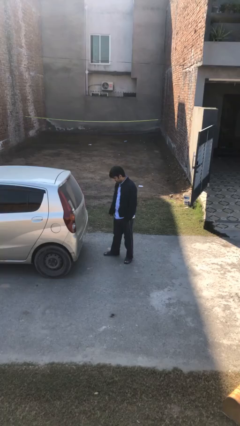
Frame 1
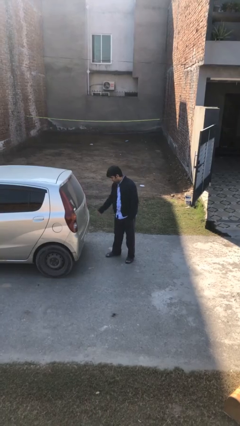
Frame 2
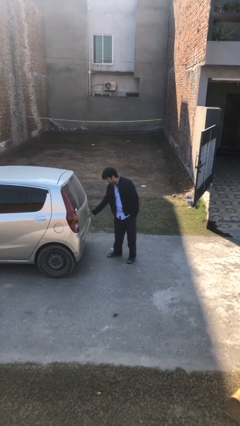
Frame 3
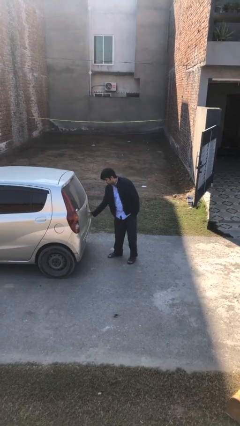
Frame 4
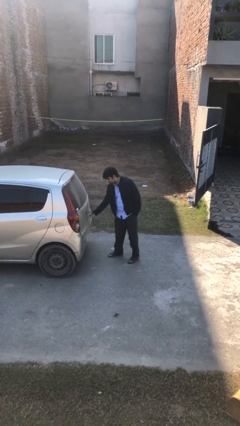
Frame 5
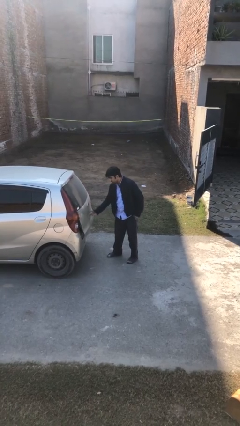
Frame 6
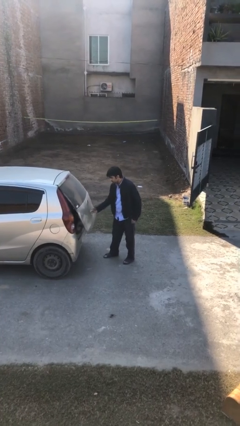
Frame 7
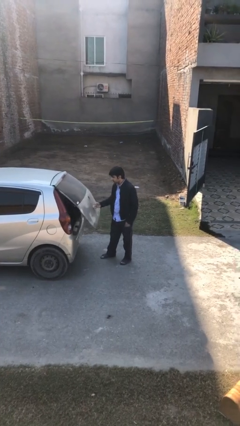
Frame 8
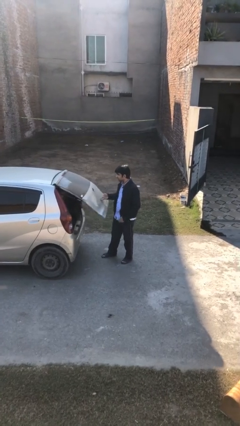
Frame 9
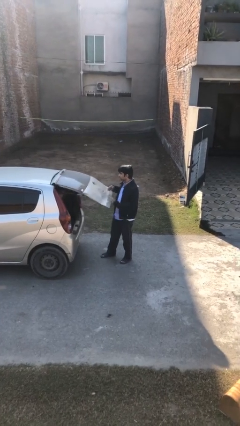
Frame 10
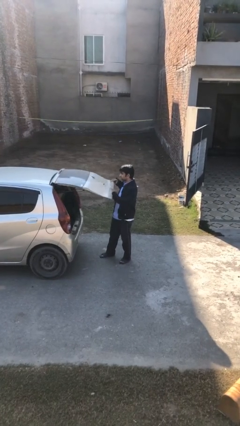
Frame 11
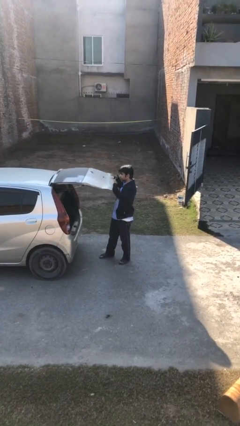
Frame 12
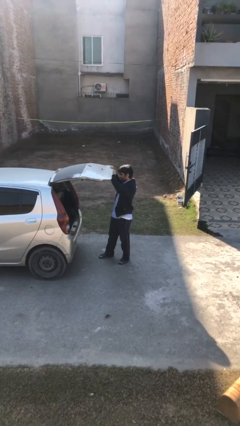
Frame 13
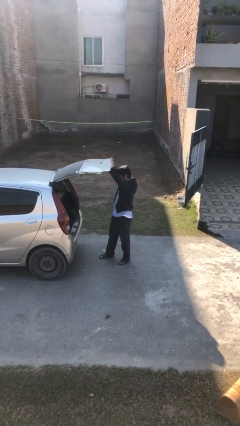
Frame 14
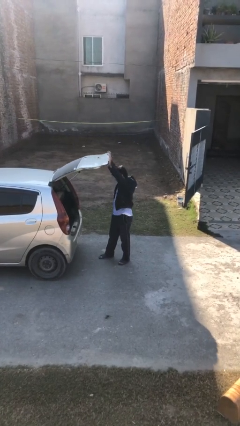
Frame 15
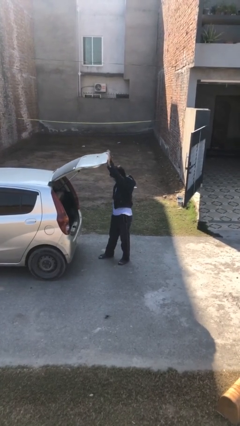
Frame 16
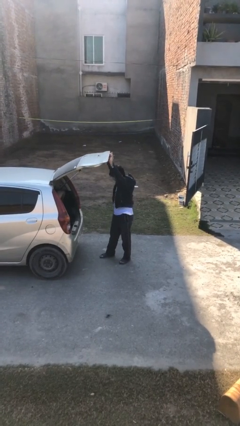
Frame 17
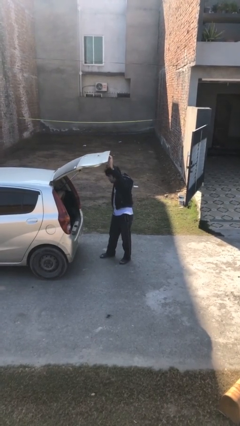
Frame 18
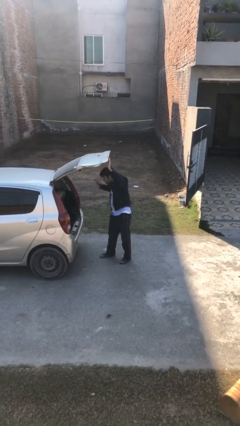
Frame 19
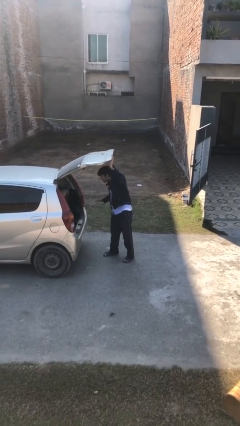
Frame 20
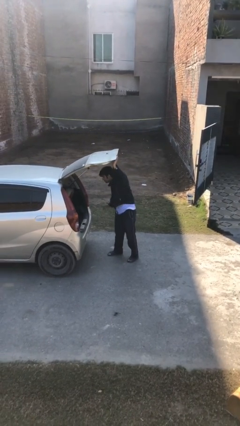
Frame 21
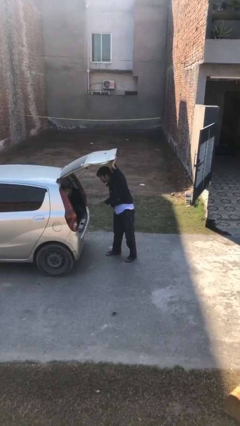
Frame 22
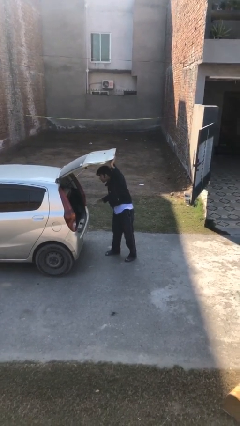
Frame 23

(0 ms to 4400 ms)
person opens car trunk

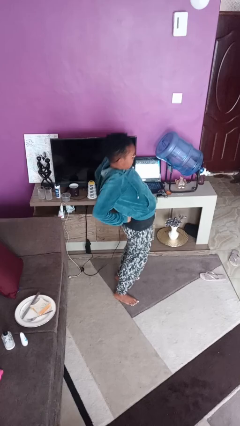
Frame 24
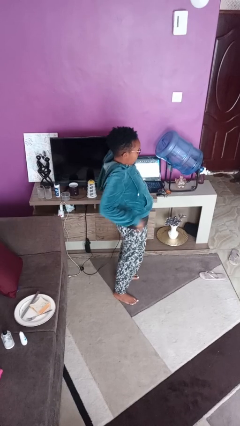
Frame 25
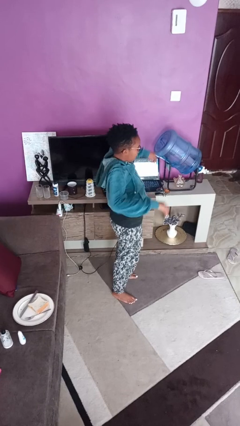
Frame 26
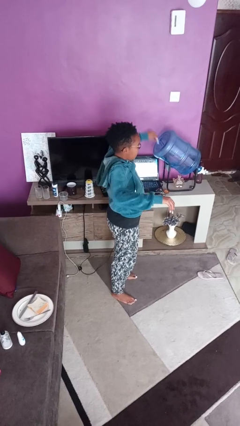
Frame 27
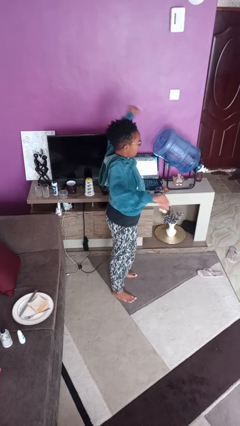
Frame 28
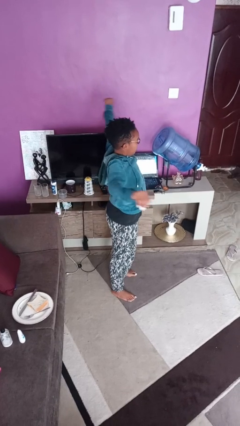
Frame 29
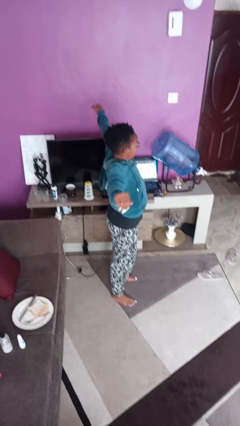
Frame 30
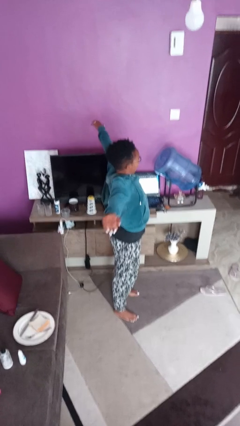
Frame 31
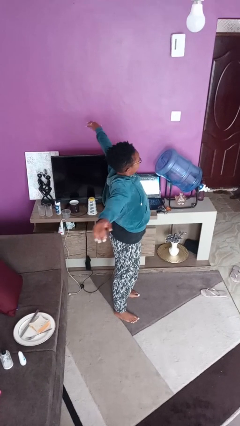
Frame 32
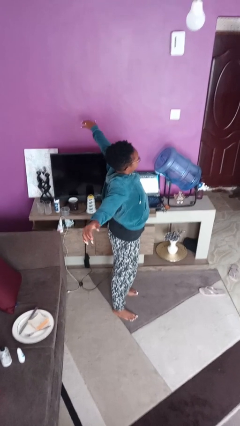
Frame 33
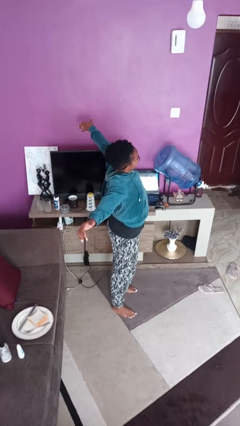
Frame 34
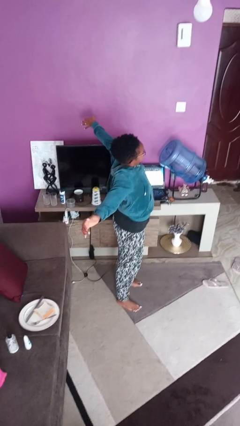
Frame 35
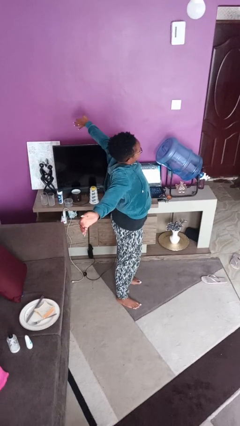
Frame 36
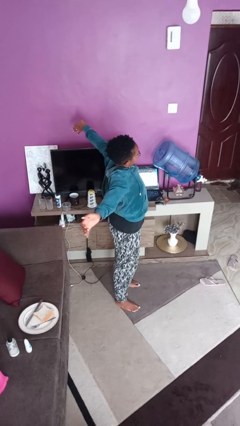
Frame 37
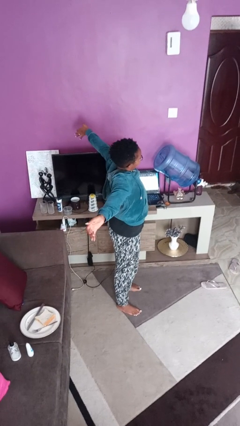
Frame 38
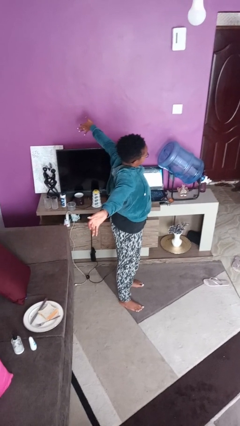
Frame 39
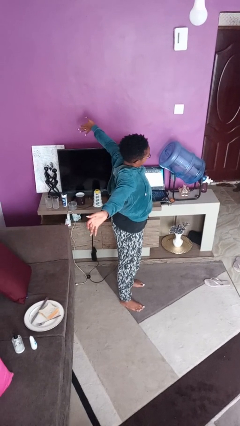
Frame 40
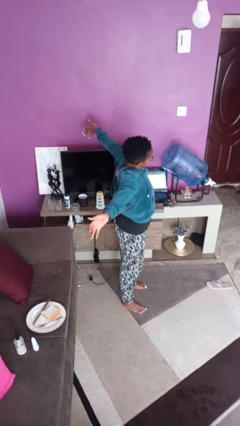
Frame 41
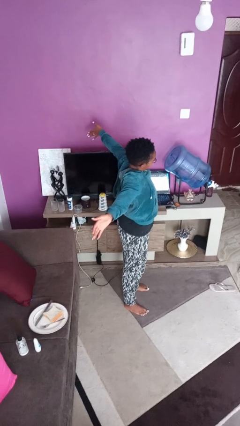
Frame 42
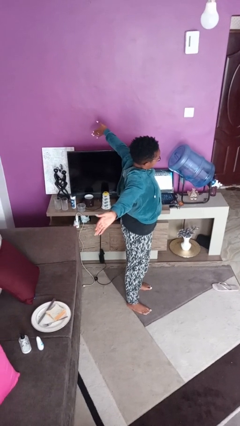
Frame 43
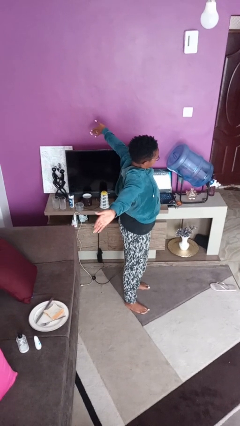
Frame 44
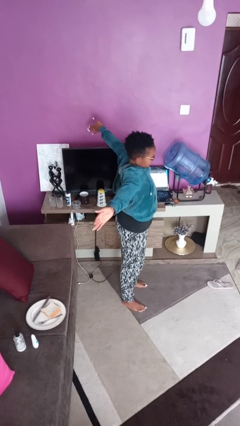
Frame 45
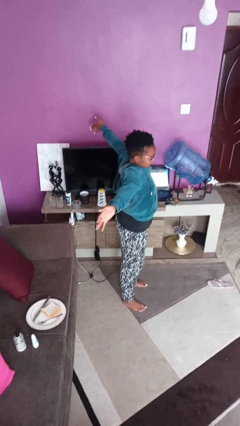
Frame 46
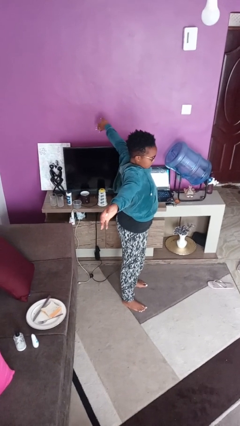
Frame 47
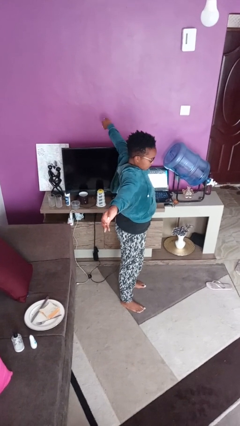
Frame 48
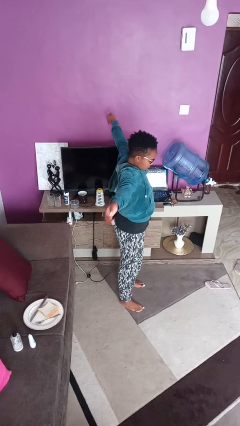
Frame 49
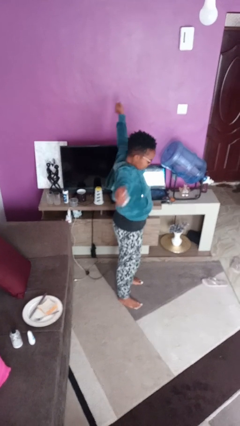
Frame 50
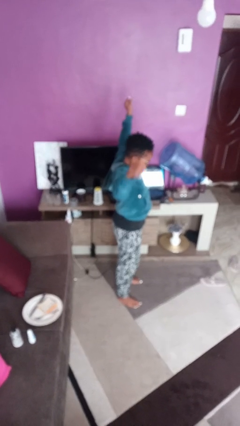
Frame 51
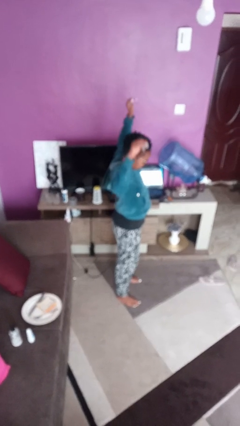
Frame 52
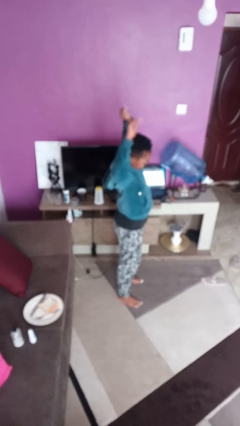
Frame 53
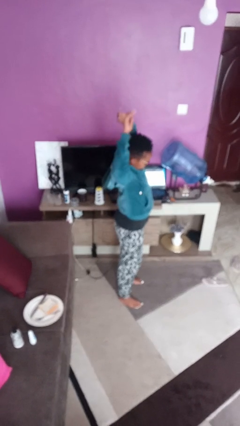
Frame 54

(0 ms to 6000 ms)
person stretches arms to side

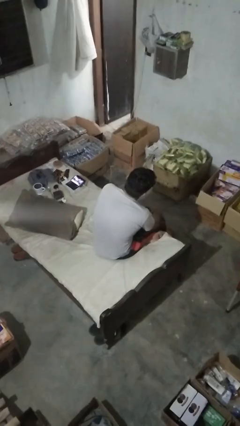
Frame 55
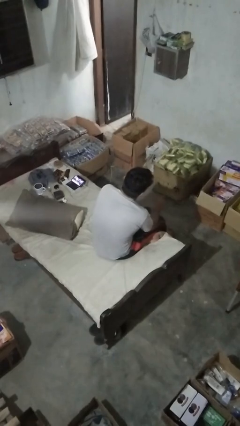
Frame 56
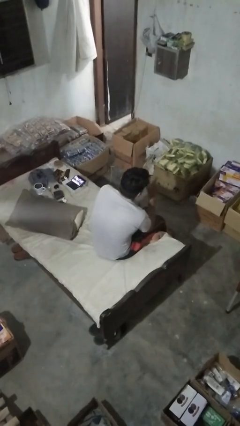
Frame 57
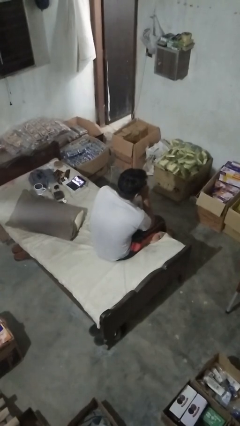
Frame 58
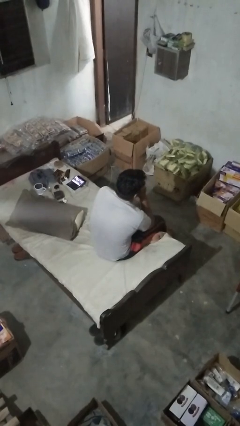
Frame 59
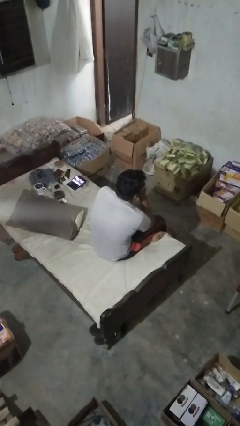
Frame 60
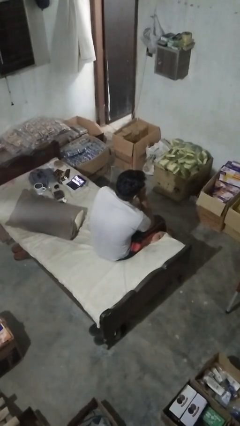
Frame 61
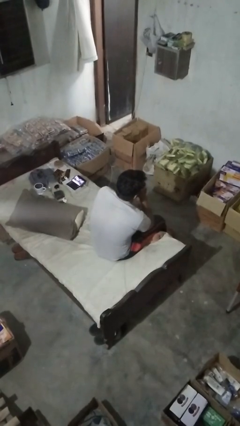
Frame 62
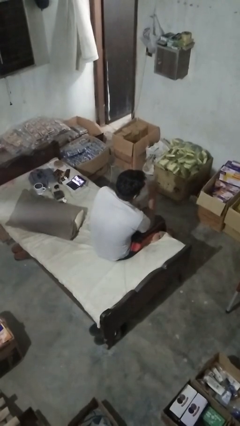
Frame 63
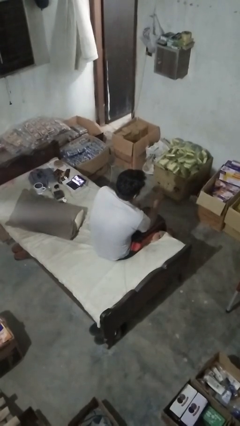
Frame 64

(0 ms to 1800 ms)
person gestures be quiet

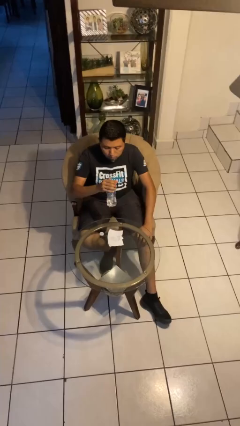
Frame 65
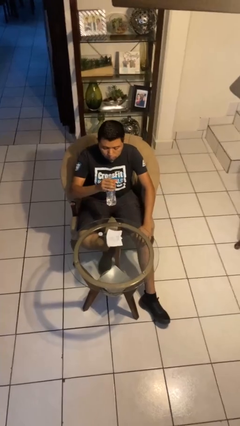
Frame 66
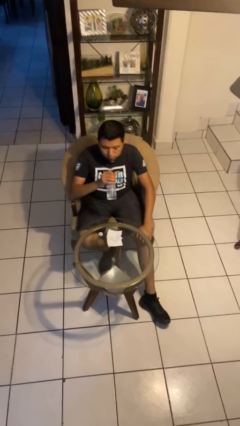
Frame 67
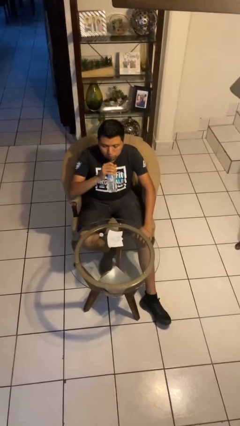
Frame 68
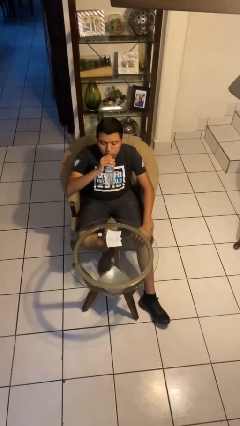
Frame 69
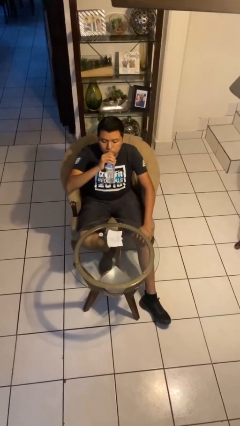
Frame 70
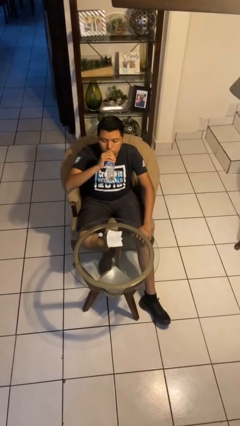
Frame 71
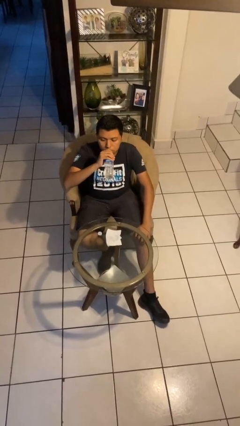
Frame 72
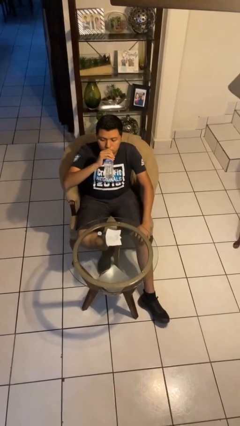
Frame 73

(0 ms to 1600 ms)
person drinks from bottle

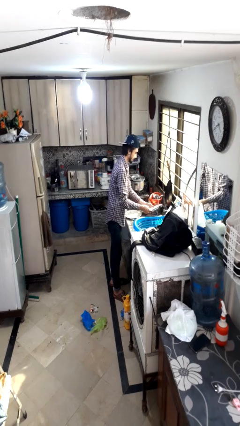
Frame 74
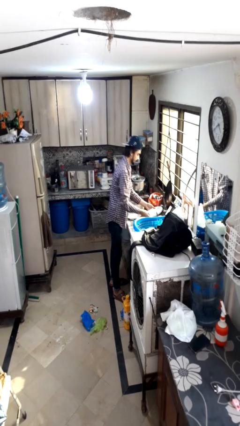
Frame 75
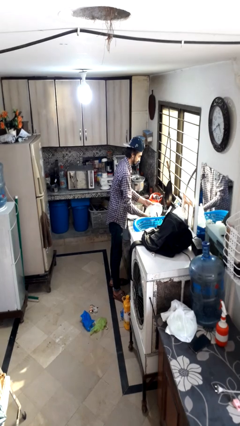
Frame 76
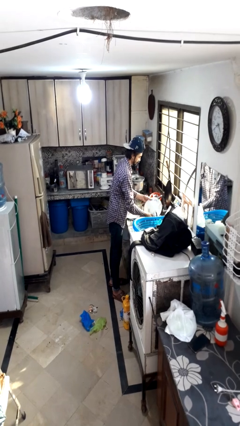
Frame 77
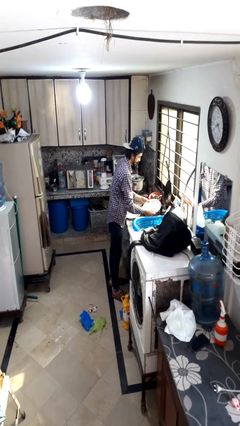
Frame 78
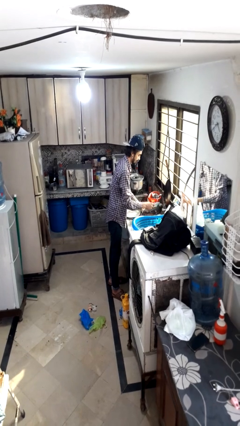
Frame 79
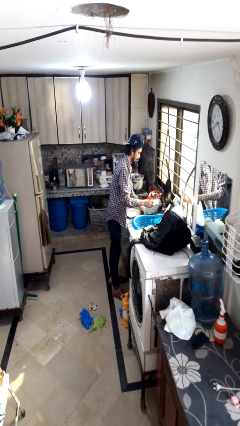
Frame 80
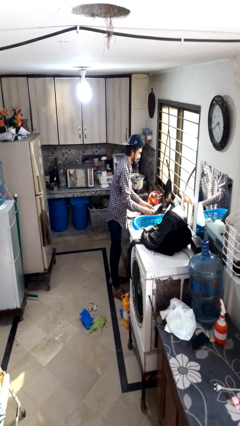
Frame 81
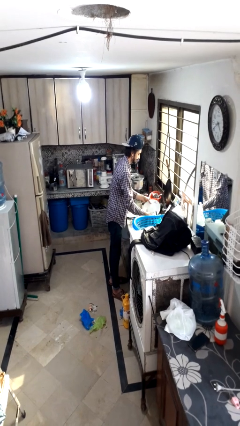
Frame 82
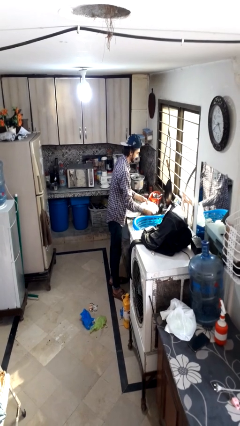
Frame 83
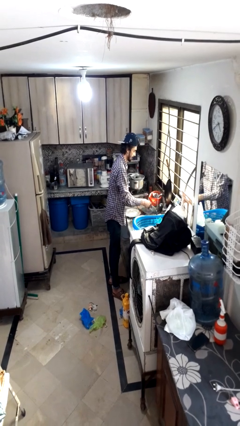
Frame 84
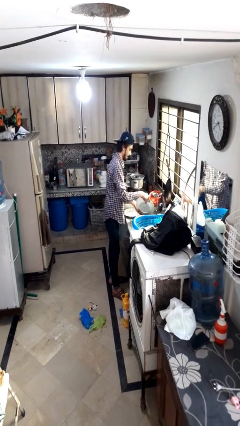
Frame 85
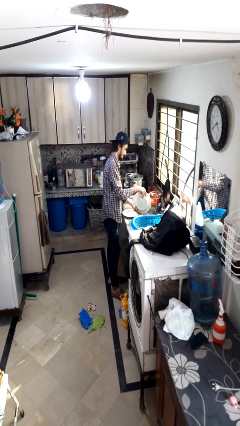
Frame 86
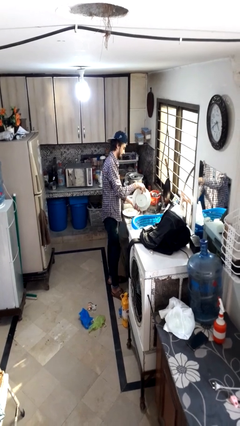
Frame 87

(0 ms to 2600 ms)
person washes dish

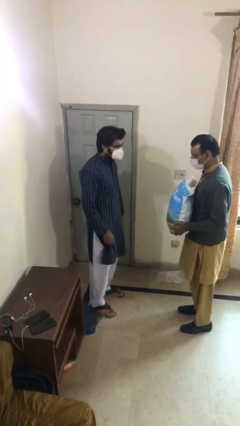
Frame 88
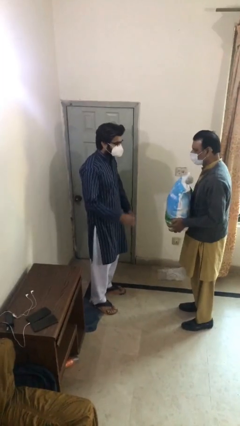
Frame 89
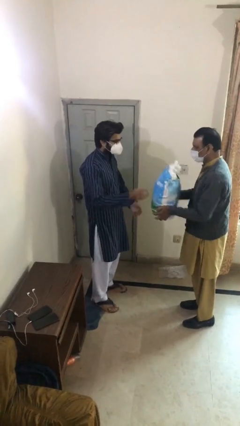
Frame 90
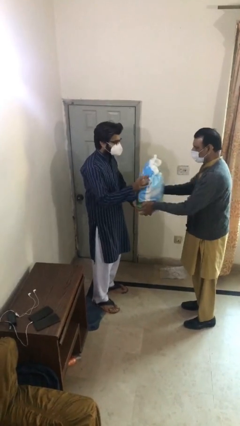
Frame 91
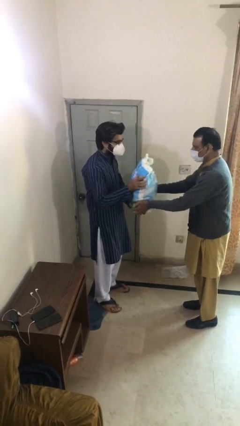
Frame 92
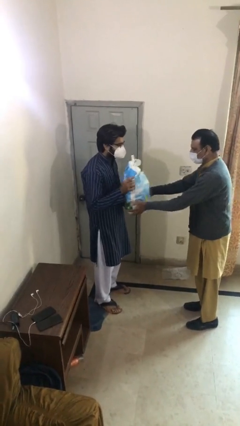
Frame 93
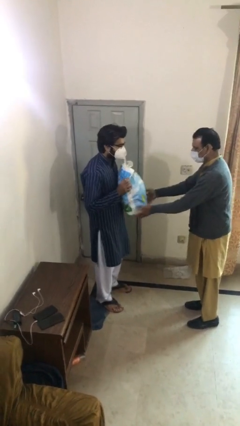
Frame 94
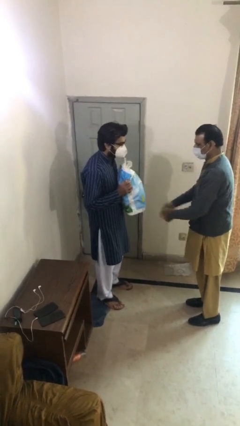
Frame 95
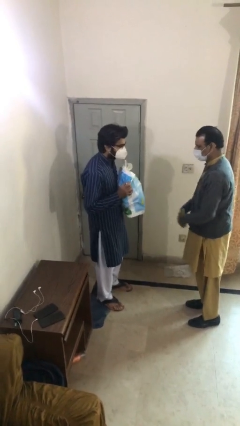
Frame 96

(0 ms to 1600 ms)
person transfers object to person
